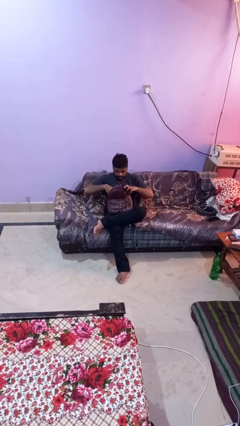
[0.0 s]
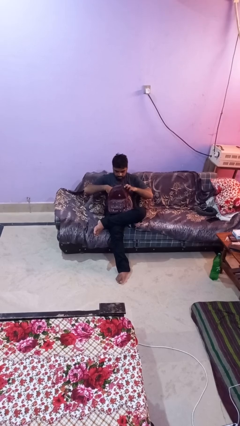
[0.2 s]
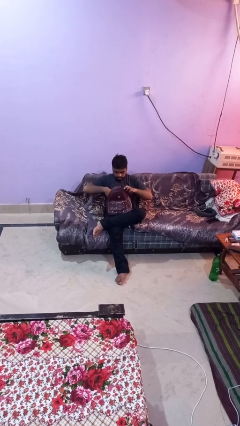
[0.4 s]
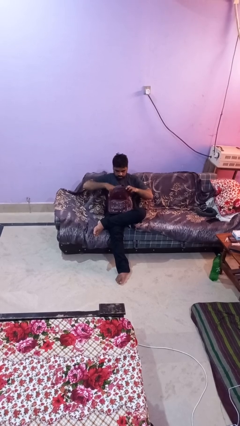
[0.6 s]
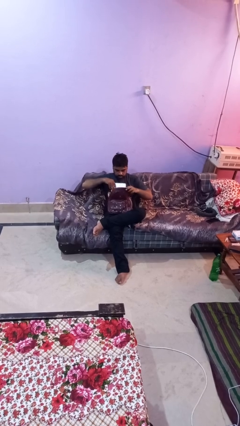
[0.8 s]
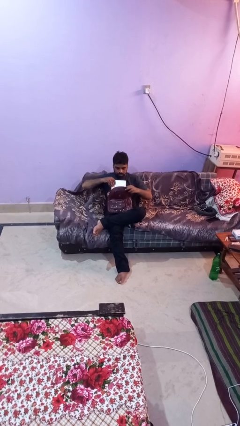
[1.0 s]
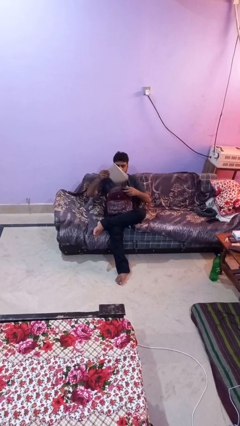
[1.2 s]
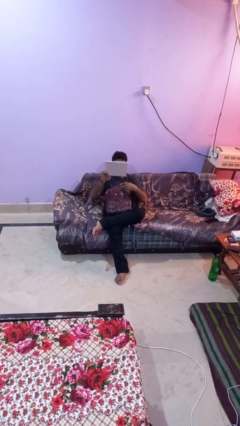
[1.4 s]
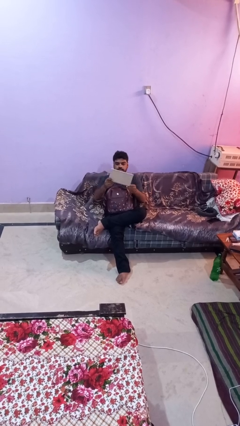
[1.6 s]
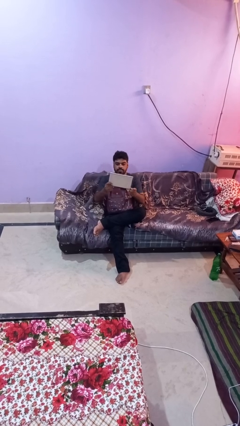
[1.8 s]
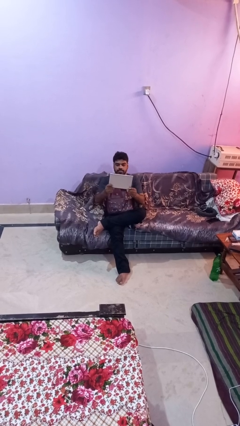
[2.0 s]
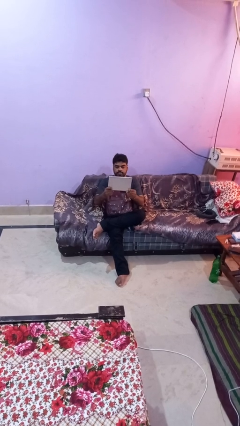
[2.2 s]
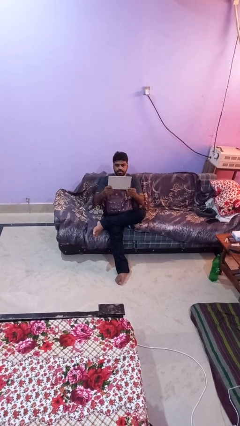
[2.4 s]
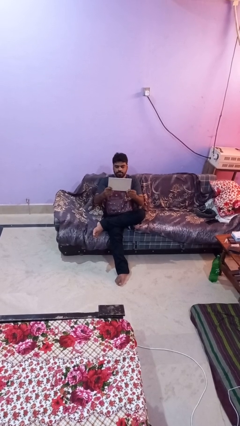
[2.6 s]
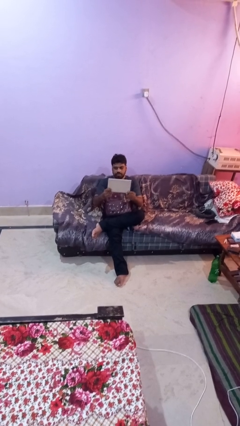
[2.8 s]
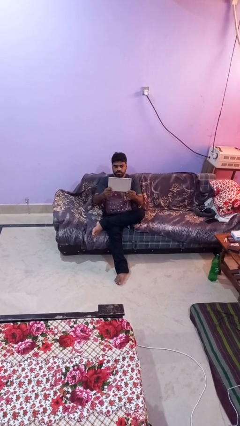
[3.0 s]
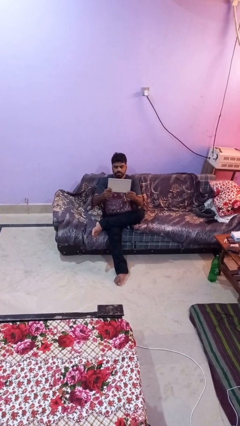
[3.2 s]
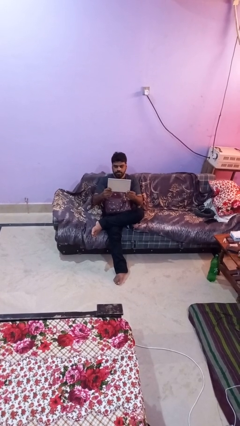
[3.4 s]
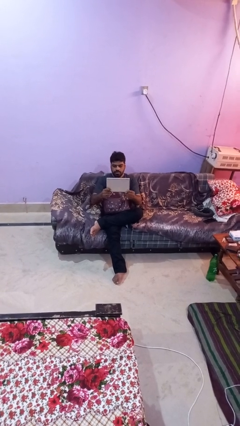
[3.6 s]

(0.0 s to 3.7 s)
person takes object from backpack

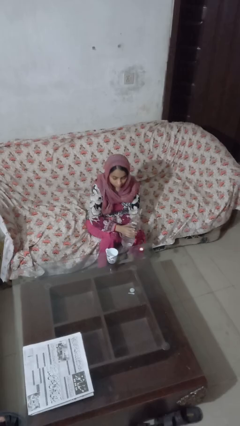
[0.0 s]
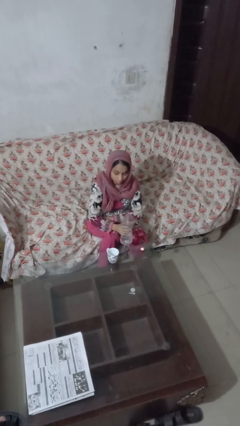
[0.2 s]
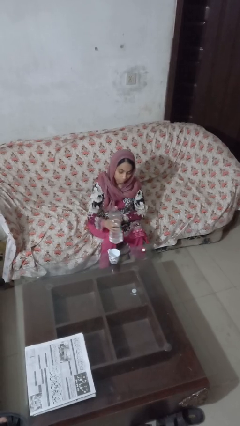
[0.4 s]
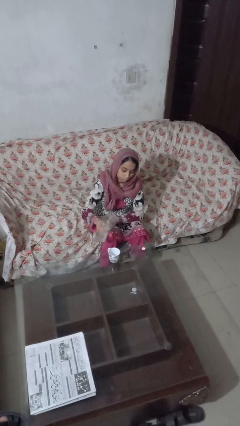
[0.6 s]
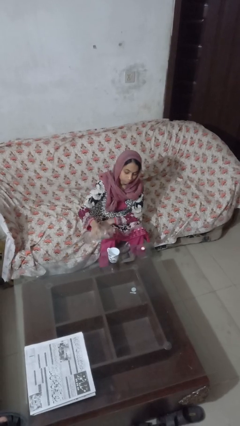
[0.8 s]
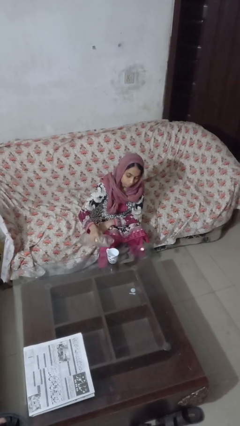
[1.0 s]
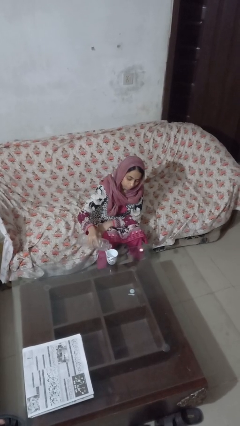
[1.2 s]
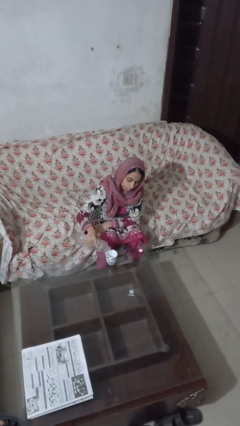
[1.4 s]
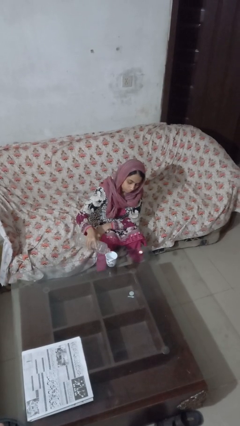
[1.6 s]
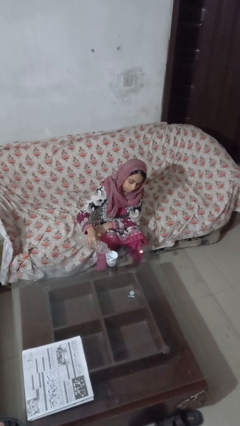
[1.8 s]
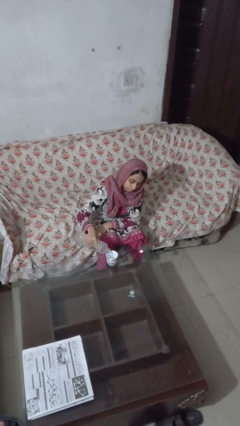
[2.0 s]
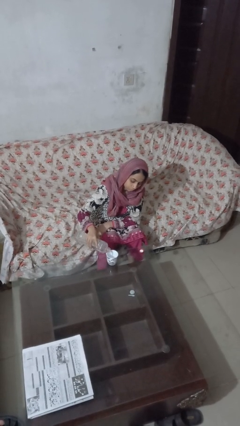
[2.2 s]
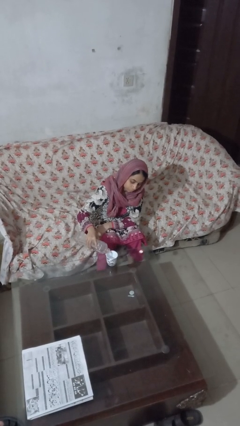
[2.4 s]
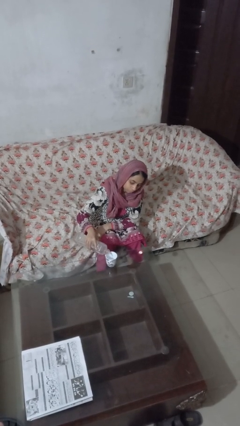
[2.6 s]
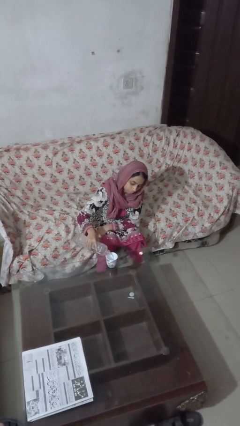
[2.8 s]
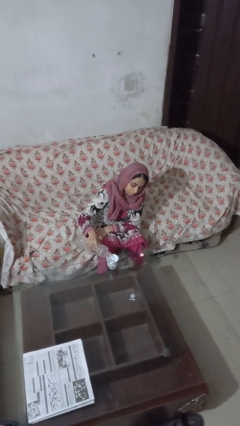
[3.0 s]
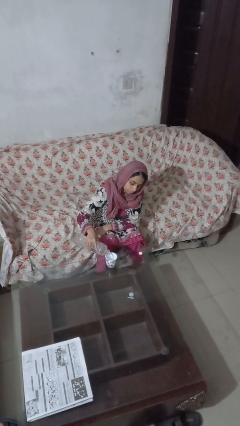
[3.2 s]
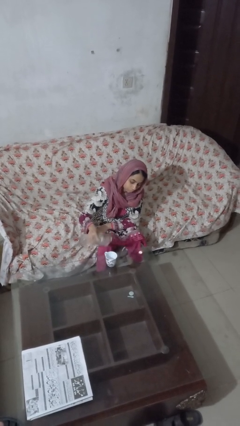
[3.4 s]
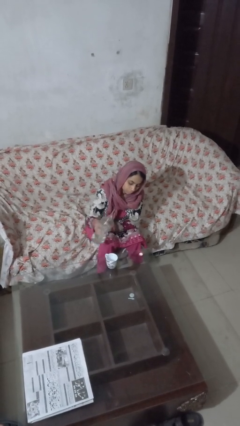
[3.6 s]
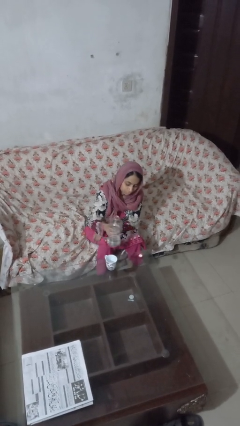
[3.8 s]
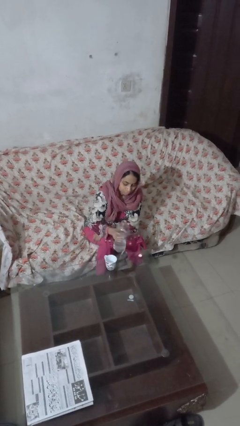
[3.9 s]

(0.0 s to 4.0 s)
person pours liquid into cup

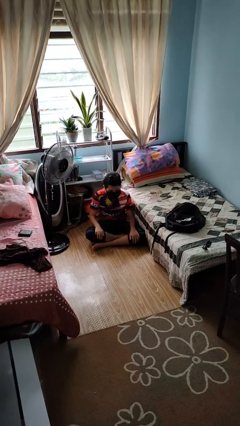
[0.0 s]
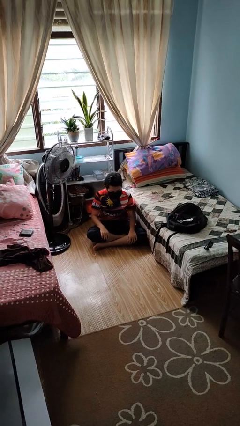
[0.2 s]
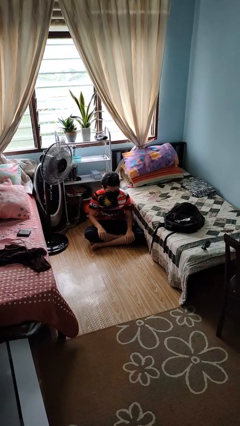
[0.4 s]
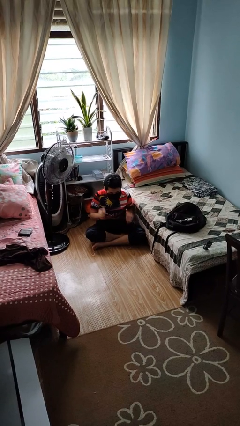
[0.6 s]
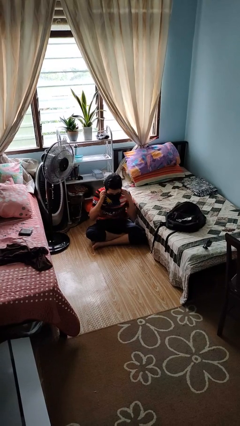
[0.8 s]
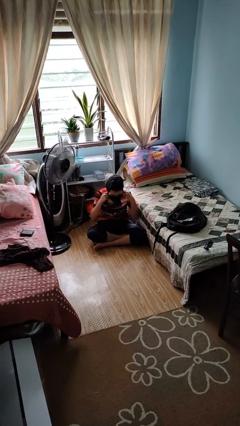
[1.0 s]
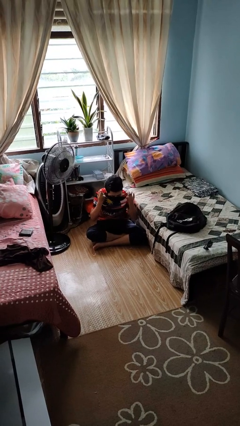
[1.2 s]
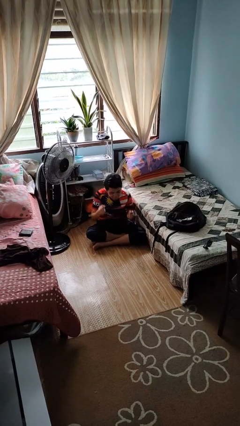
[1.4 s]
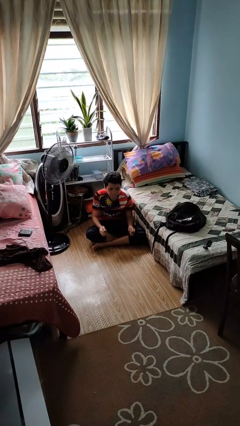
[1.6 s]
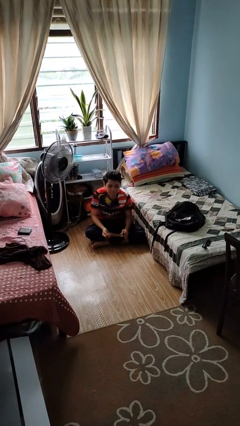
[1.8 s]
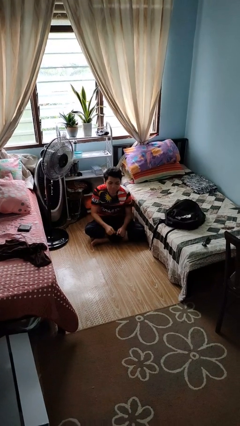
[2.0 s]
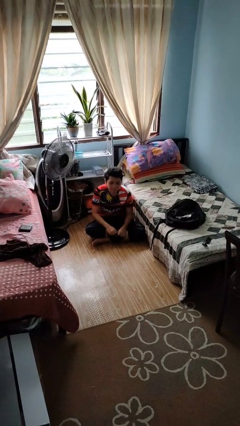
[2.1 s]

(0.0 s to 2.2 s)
person takes off facemask

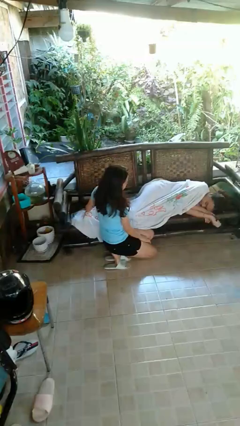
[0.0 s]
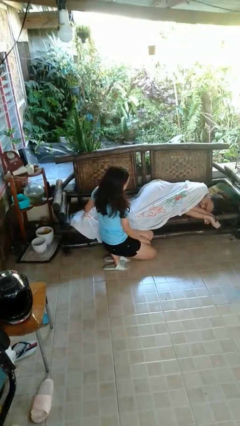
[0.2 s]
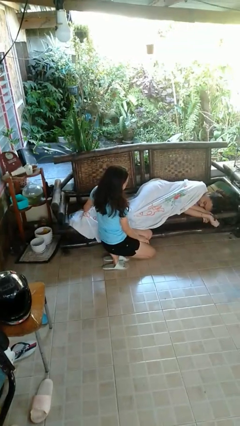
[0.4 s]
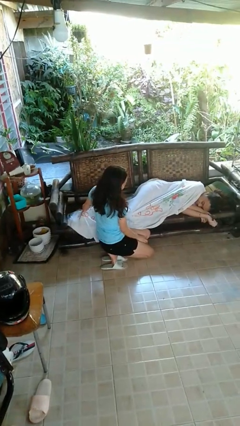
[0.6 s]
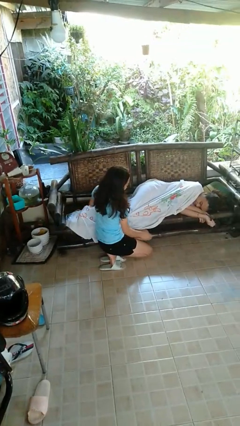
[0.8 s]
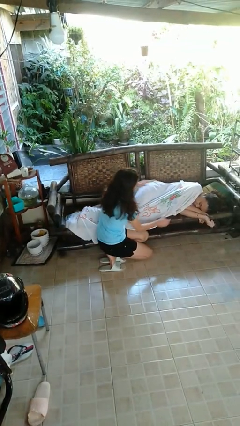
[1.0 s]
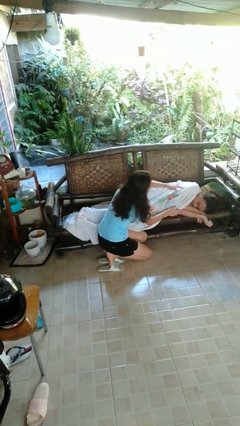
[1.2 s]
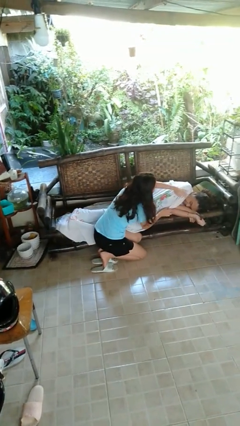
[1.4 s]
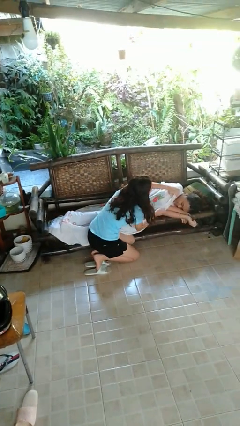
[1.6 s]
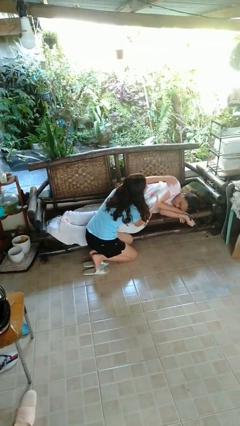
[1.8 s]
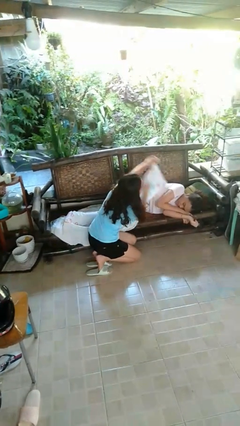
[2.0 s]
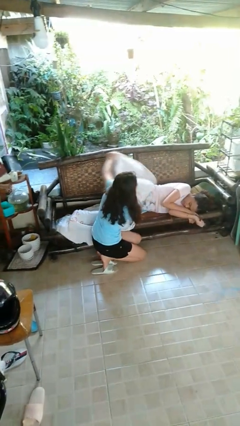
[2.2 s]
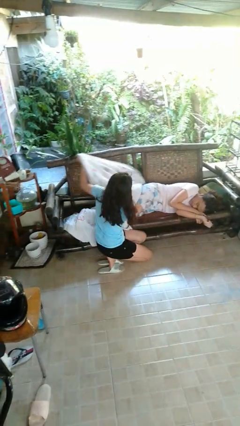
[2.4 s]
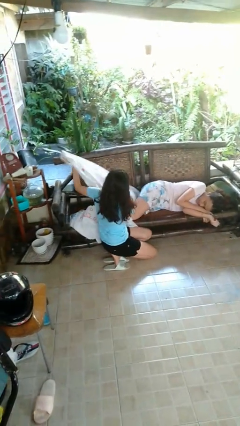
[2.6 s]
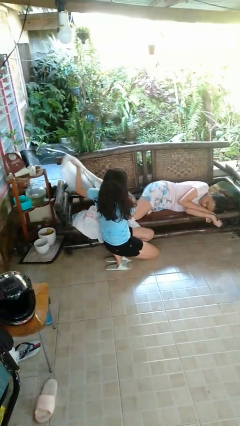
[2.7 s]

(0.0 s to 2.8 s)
person uncovers friend with blanket

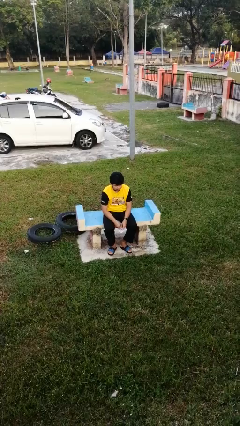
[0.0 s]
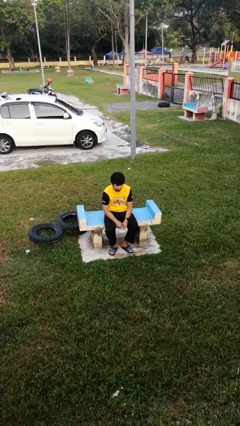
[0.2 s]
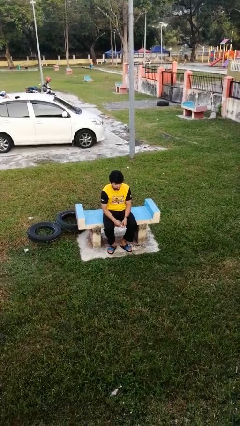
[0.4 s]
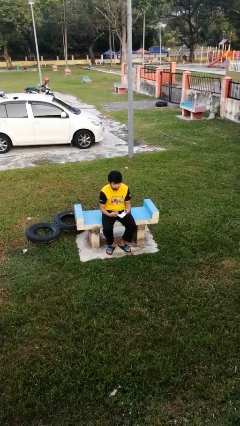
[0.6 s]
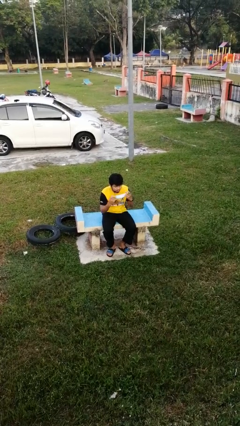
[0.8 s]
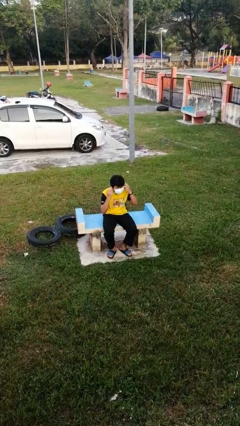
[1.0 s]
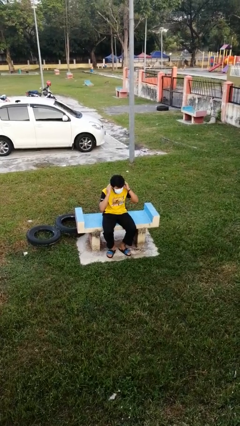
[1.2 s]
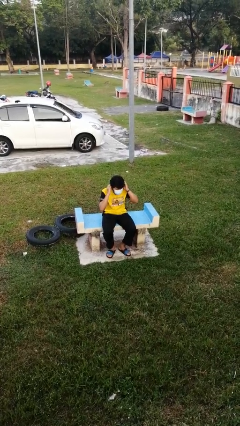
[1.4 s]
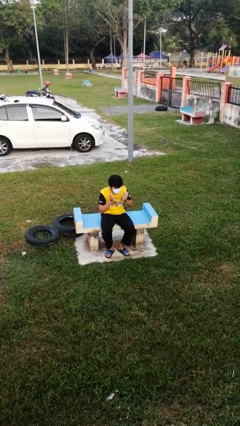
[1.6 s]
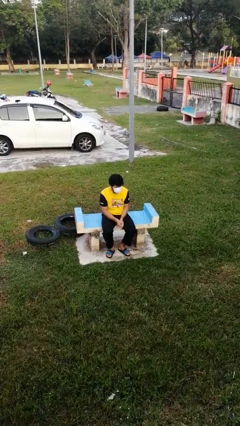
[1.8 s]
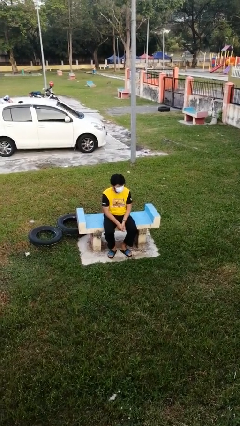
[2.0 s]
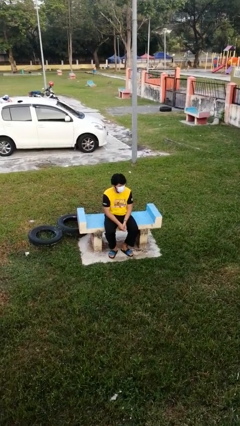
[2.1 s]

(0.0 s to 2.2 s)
person puts on facemask

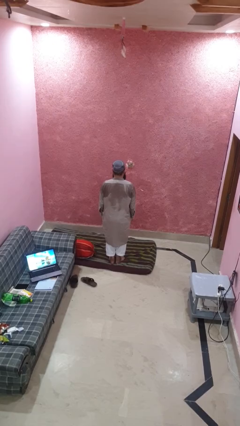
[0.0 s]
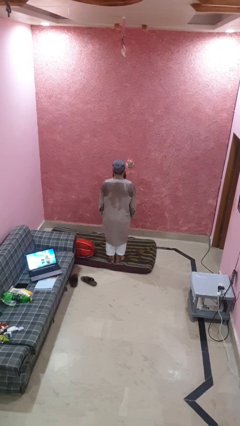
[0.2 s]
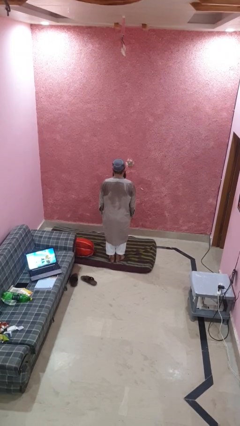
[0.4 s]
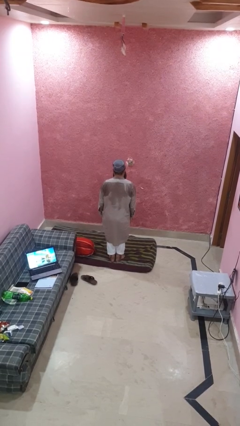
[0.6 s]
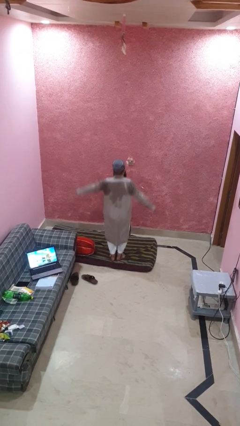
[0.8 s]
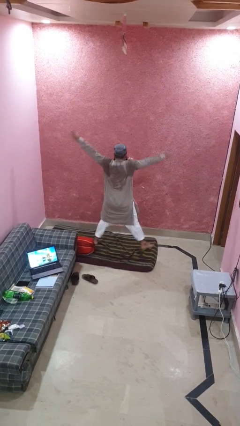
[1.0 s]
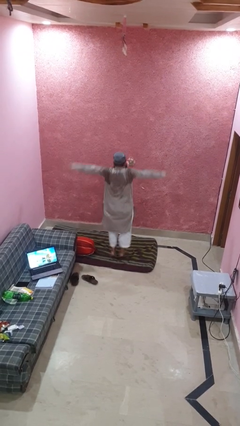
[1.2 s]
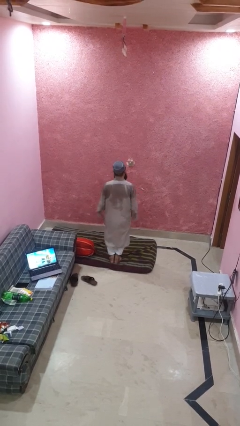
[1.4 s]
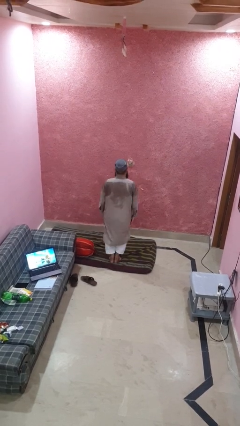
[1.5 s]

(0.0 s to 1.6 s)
person exercises with jumping jacks

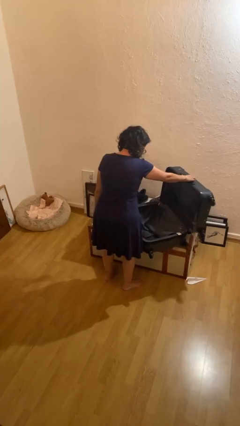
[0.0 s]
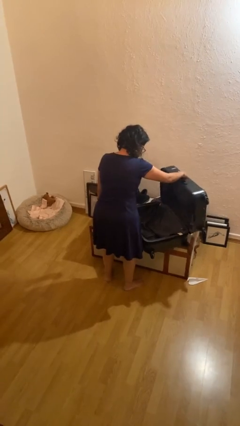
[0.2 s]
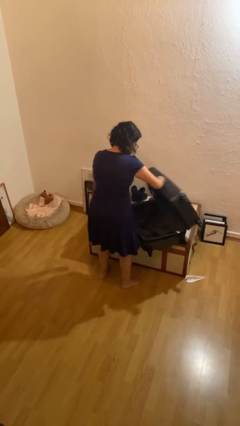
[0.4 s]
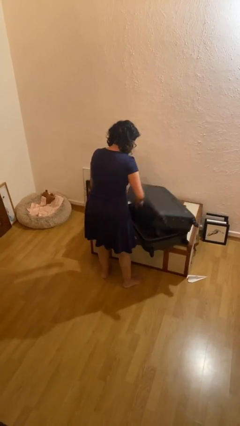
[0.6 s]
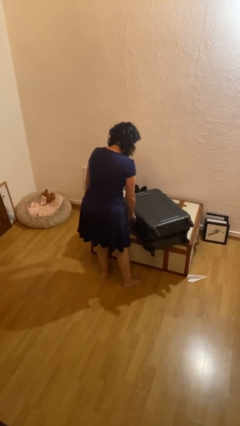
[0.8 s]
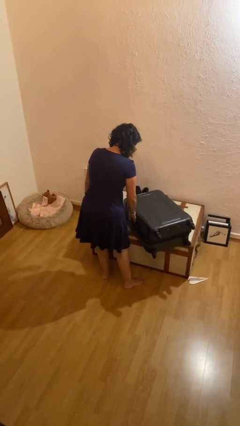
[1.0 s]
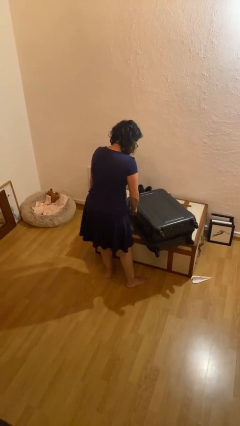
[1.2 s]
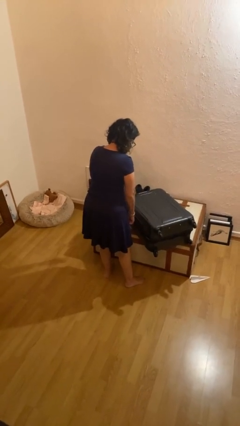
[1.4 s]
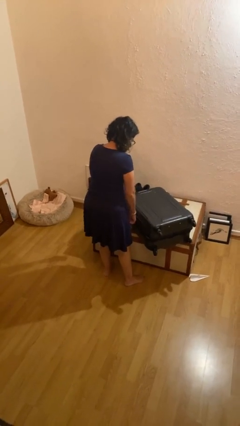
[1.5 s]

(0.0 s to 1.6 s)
person closes suitcase
